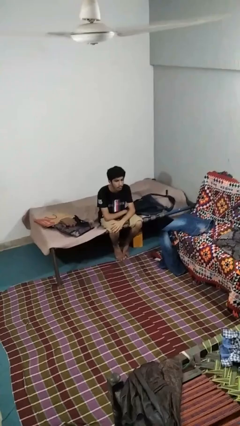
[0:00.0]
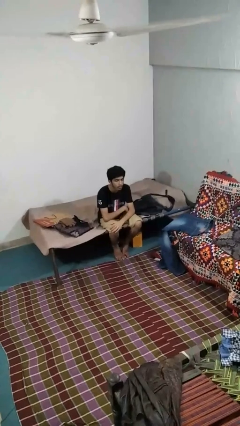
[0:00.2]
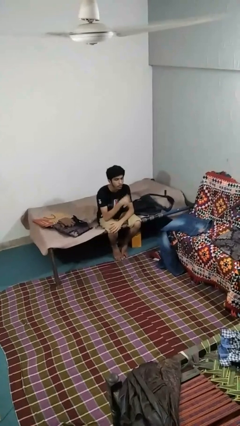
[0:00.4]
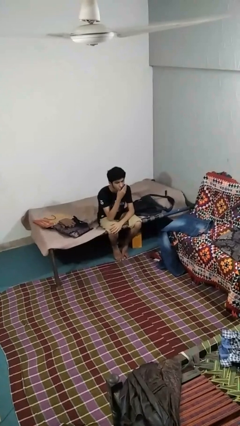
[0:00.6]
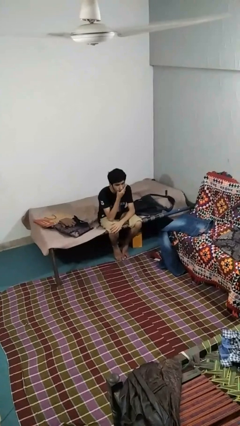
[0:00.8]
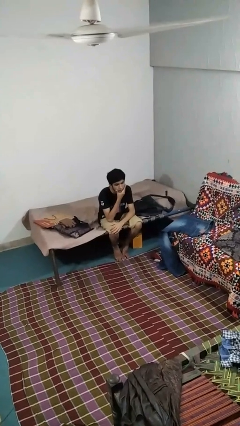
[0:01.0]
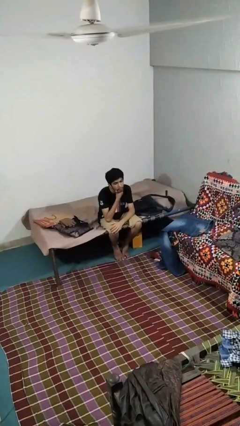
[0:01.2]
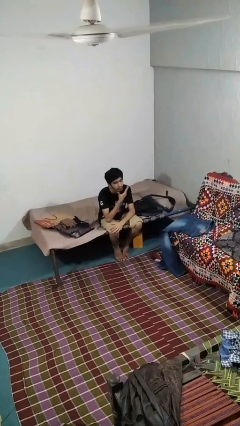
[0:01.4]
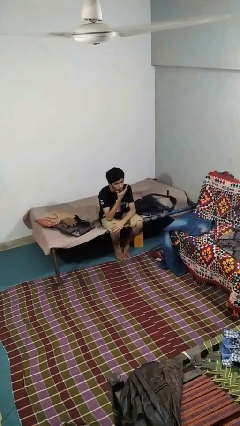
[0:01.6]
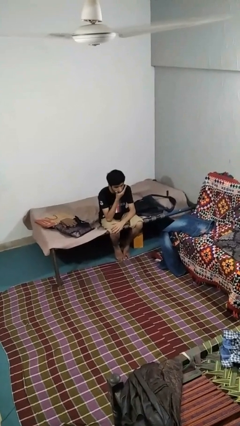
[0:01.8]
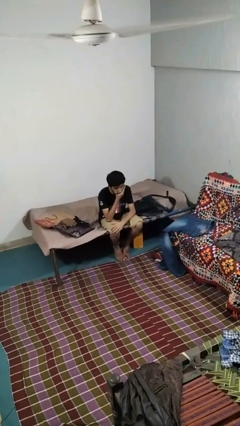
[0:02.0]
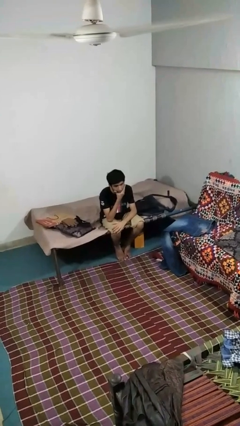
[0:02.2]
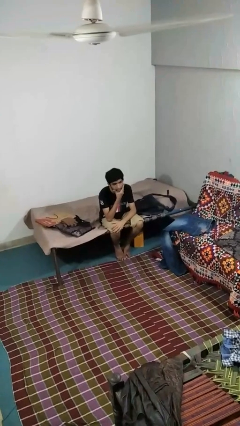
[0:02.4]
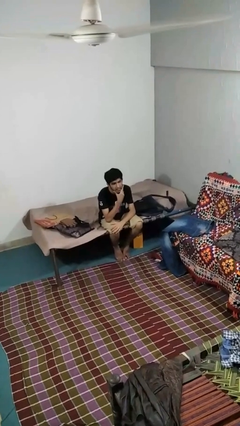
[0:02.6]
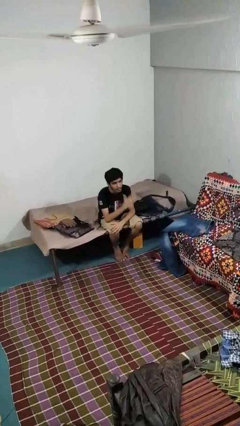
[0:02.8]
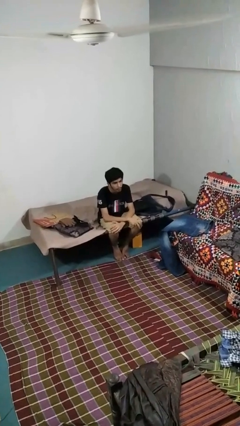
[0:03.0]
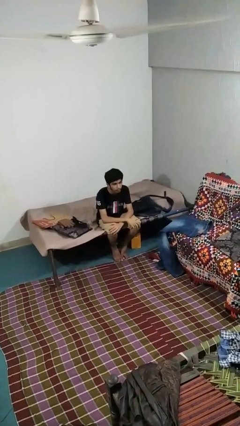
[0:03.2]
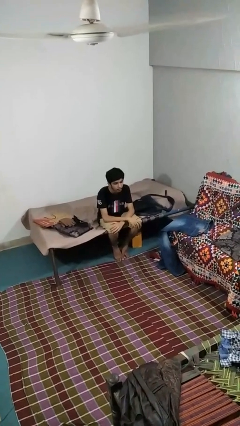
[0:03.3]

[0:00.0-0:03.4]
person strokes chin

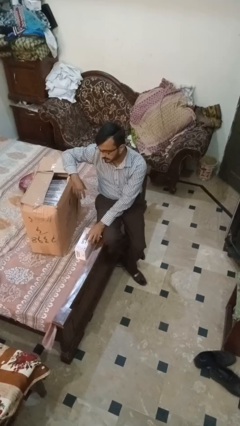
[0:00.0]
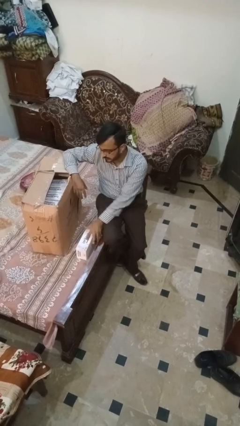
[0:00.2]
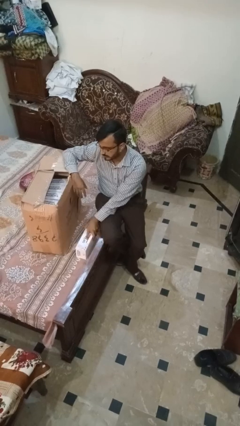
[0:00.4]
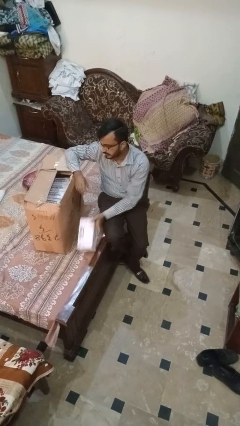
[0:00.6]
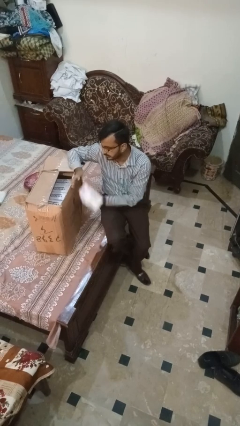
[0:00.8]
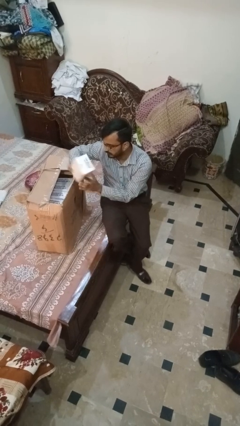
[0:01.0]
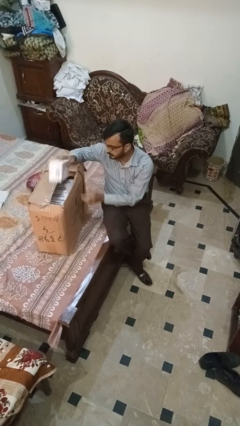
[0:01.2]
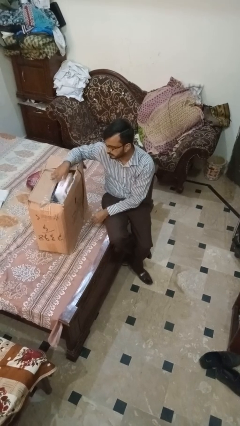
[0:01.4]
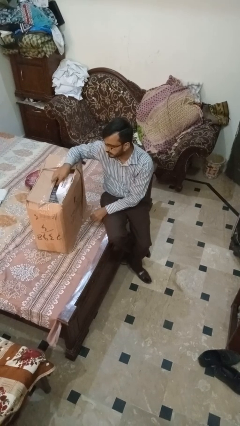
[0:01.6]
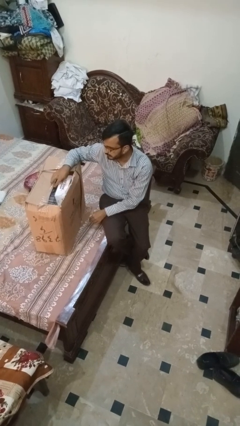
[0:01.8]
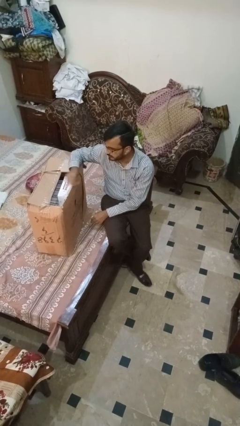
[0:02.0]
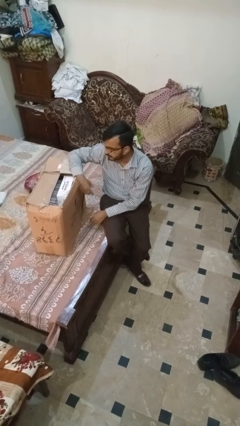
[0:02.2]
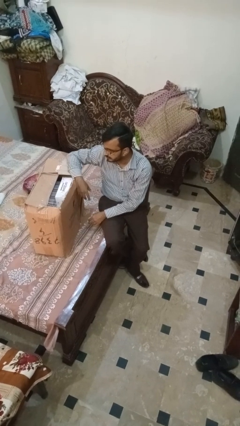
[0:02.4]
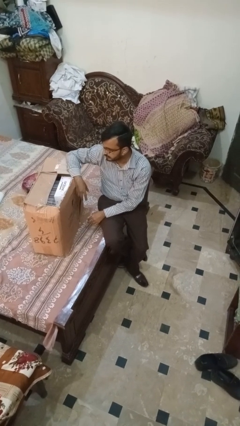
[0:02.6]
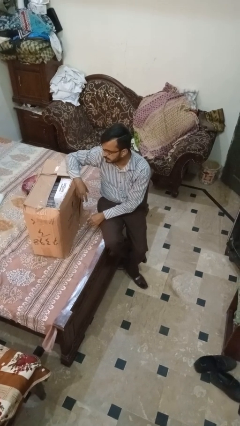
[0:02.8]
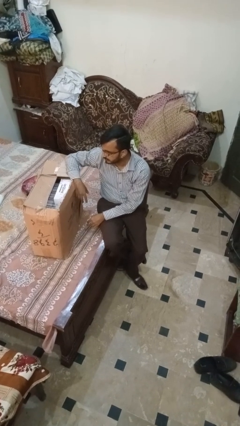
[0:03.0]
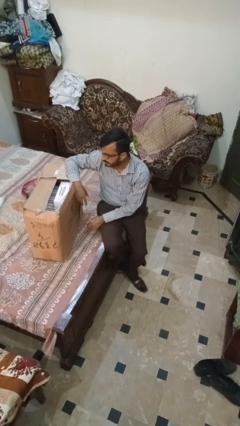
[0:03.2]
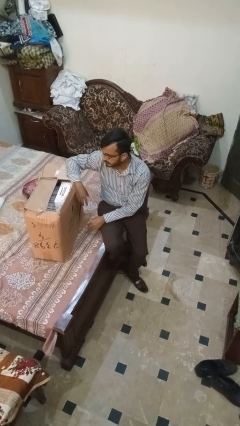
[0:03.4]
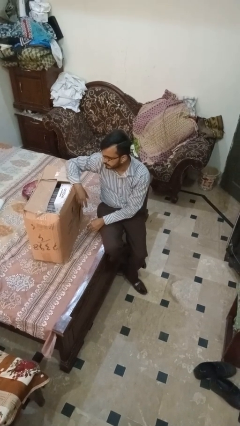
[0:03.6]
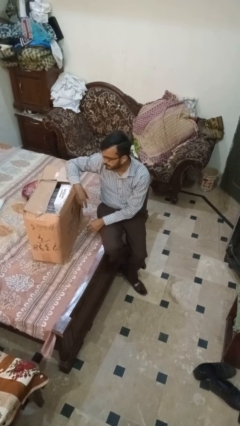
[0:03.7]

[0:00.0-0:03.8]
person puts object into box

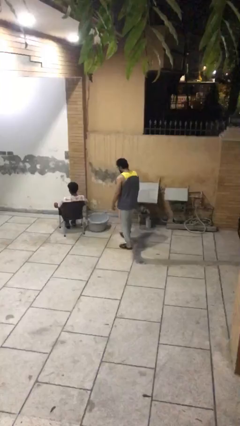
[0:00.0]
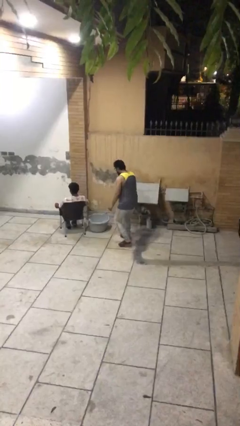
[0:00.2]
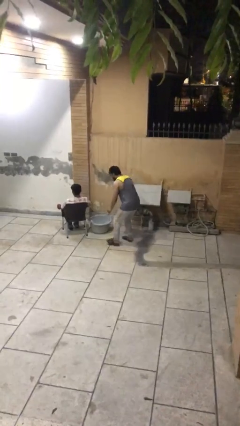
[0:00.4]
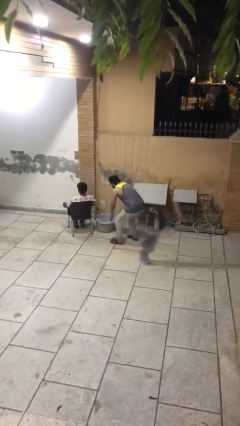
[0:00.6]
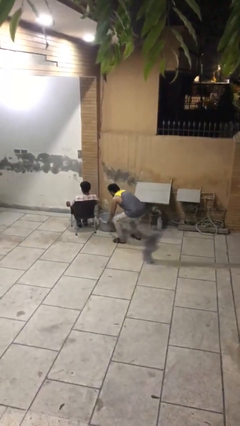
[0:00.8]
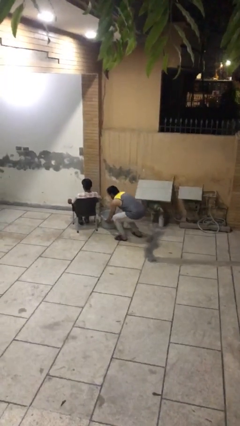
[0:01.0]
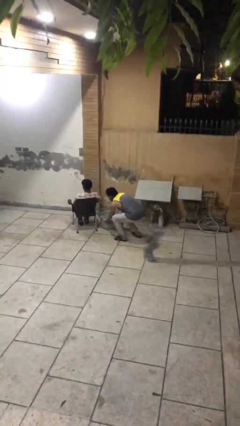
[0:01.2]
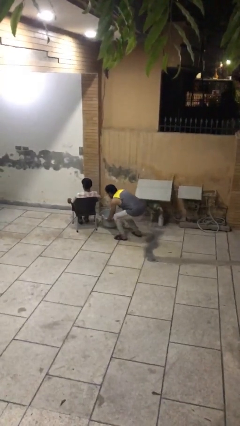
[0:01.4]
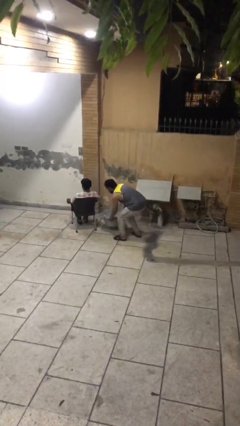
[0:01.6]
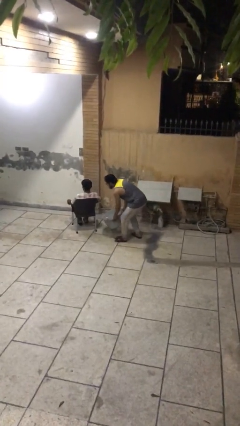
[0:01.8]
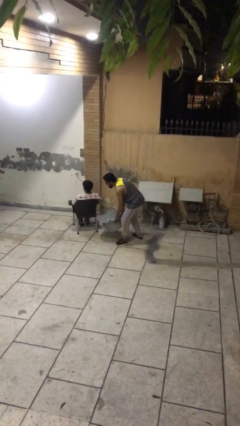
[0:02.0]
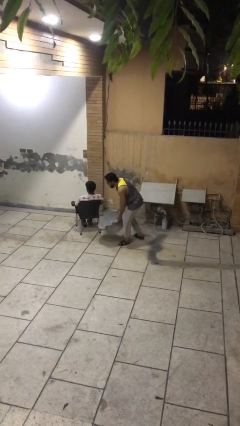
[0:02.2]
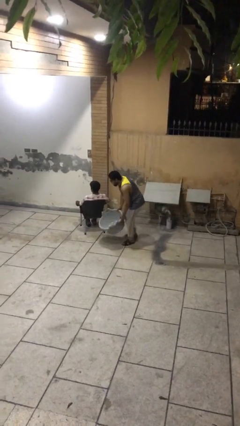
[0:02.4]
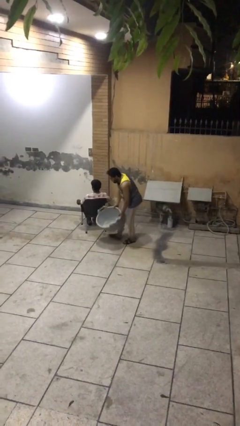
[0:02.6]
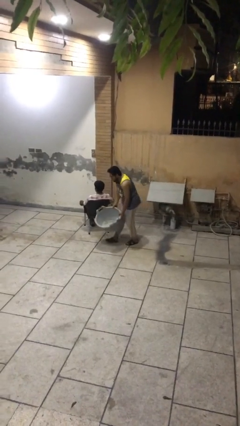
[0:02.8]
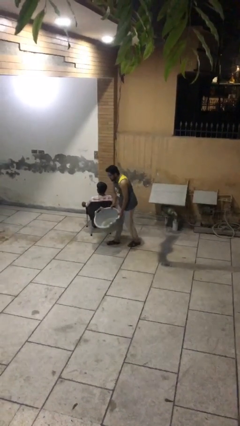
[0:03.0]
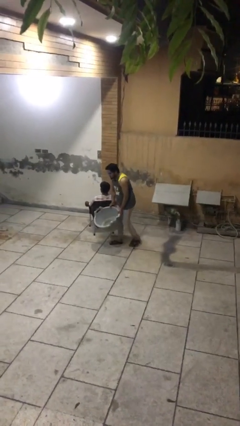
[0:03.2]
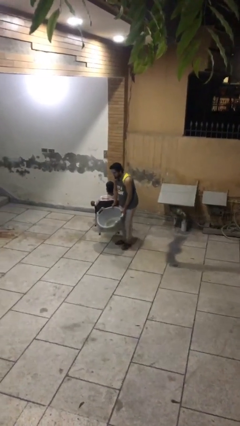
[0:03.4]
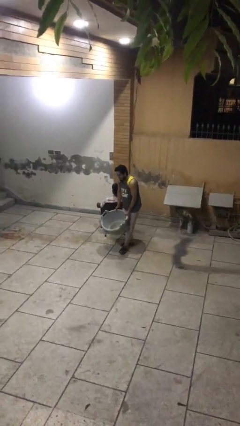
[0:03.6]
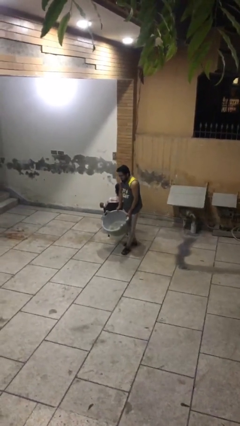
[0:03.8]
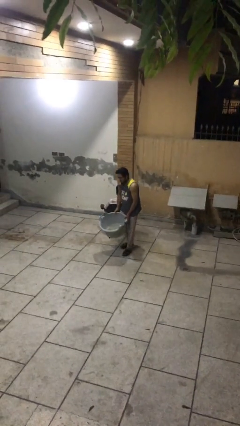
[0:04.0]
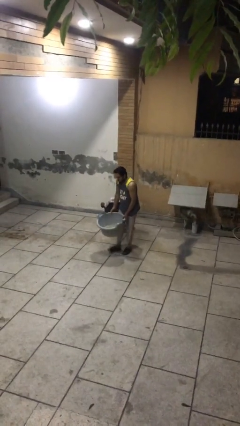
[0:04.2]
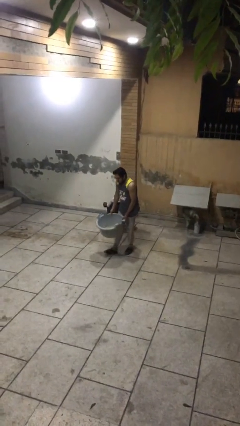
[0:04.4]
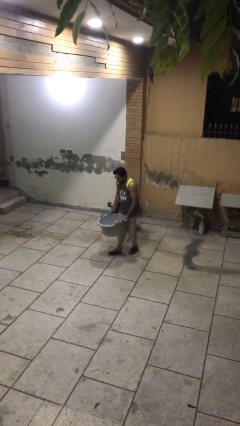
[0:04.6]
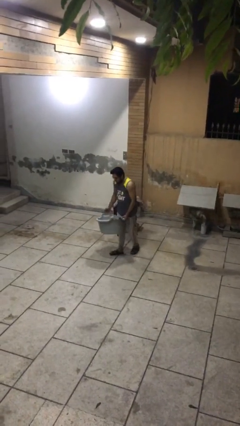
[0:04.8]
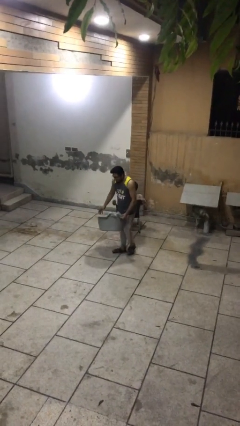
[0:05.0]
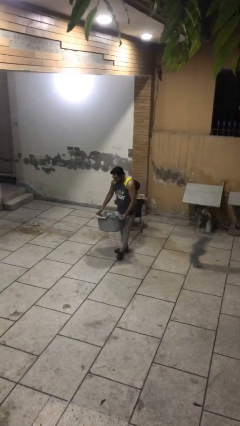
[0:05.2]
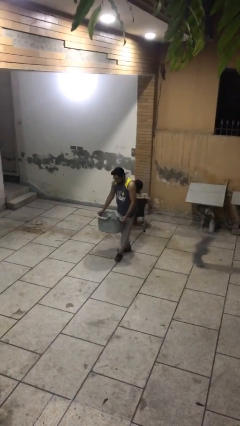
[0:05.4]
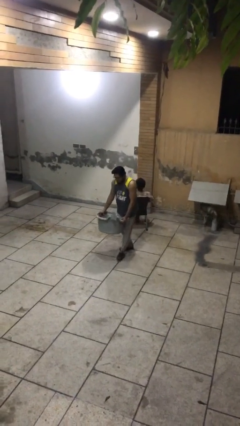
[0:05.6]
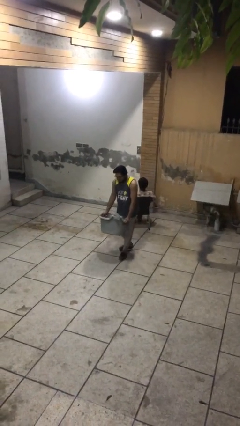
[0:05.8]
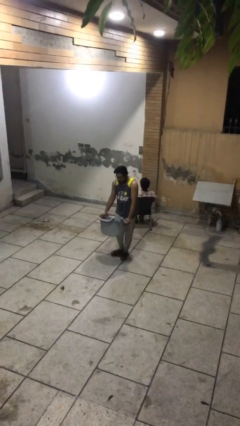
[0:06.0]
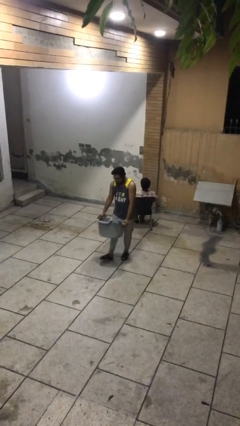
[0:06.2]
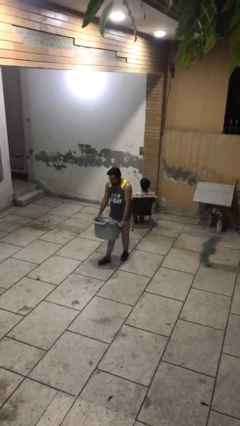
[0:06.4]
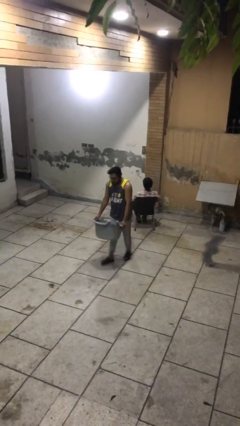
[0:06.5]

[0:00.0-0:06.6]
person steals object from person

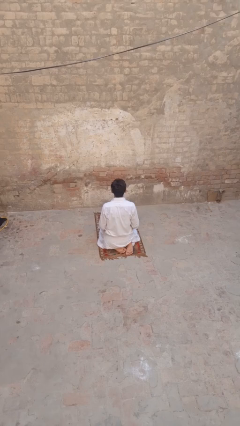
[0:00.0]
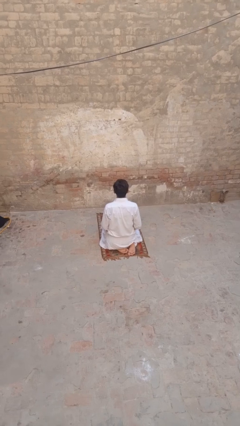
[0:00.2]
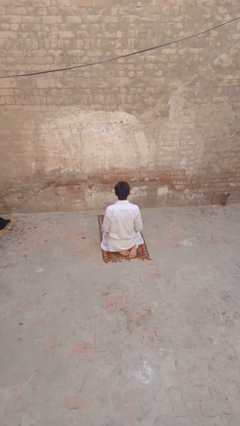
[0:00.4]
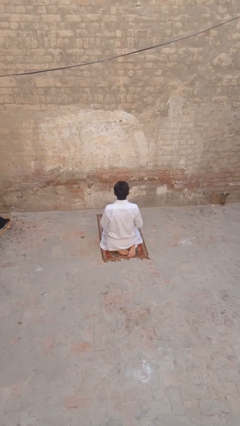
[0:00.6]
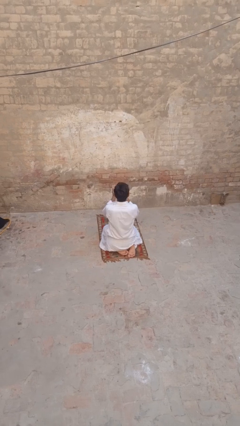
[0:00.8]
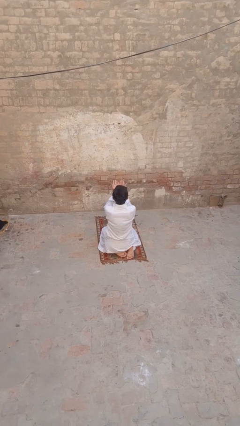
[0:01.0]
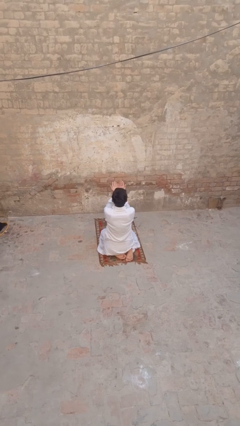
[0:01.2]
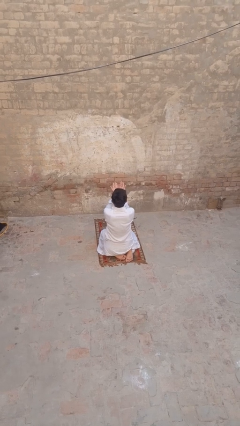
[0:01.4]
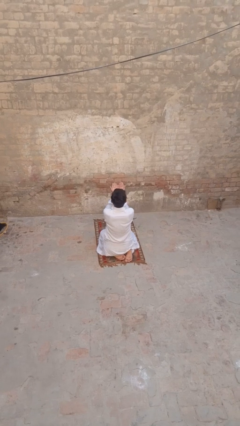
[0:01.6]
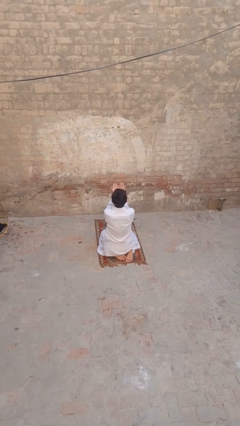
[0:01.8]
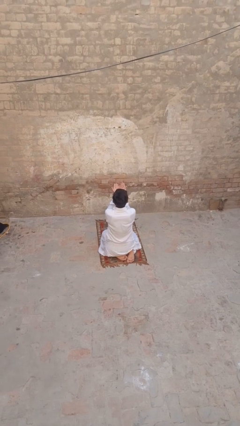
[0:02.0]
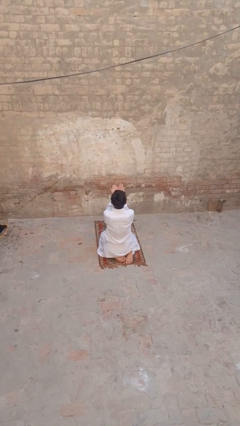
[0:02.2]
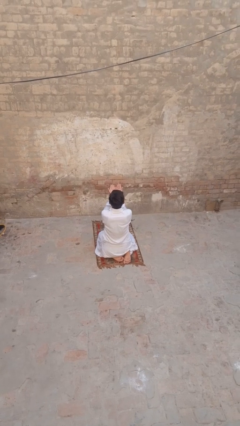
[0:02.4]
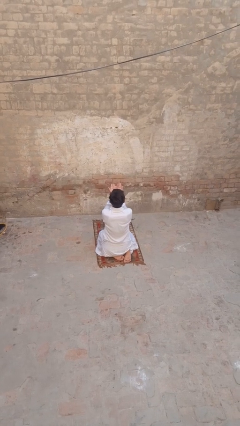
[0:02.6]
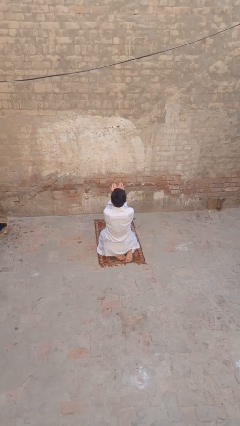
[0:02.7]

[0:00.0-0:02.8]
person prays

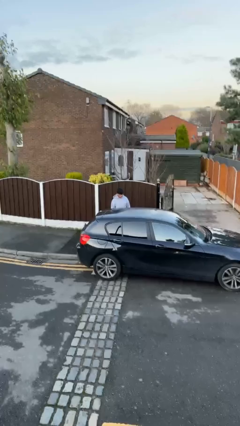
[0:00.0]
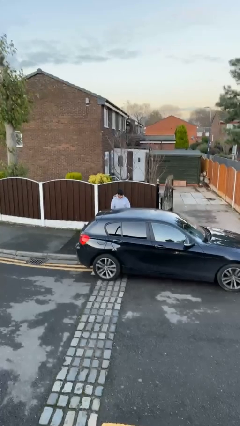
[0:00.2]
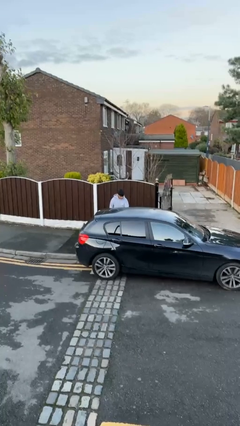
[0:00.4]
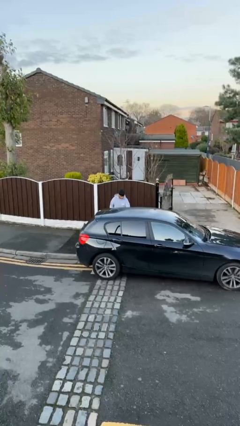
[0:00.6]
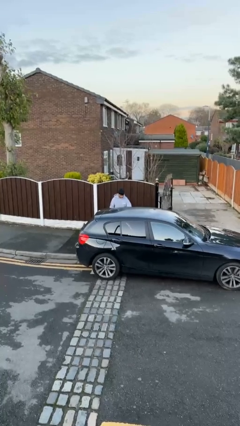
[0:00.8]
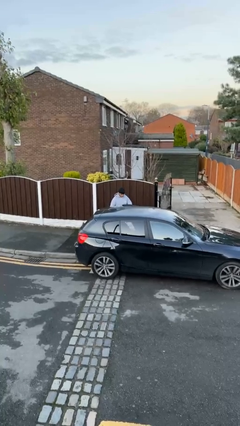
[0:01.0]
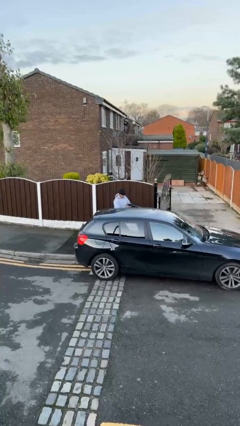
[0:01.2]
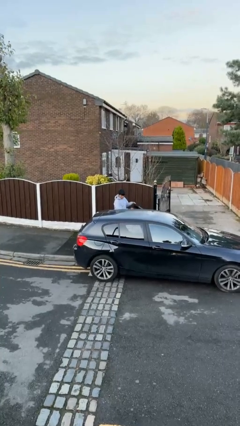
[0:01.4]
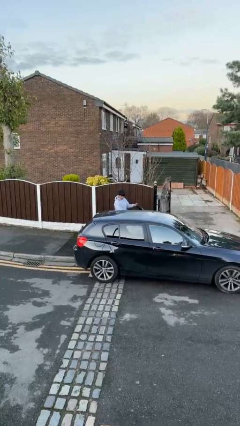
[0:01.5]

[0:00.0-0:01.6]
person opens car door
